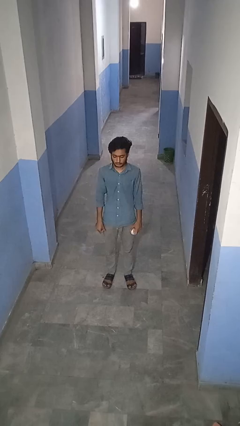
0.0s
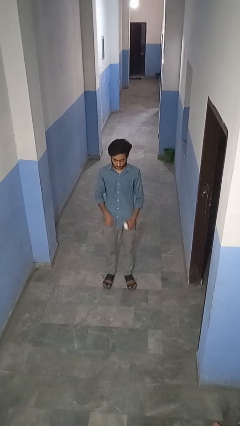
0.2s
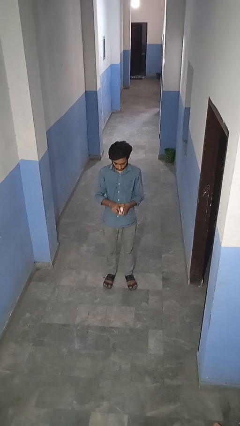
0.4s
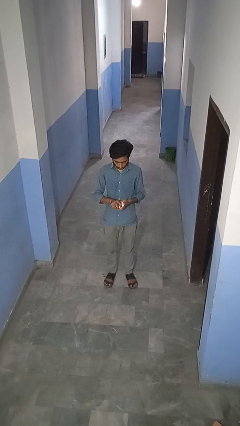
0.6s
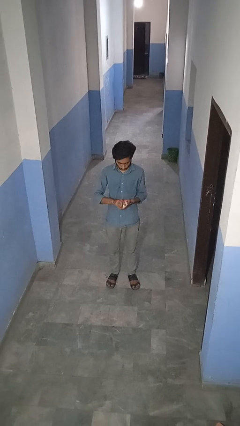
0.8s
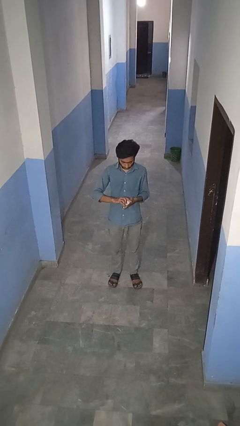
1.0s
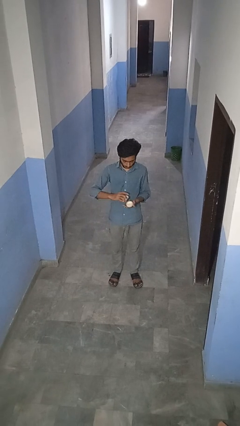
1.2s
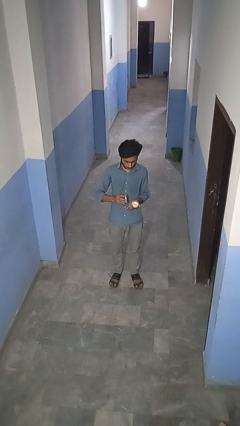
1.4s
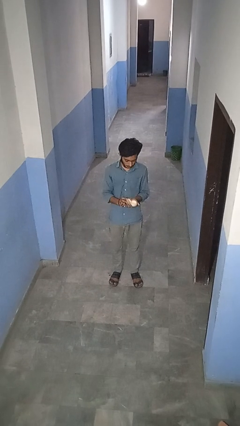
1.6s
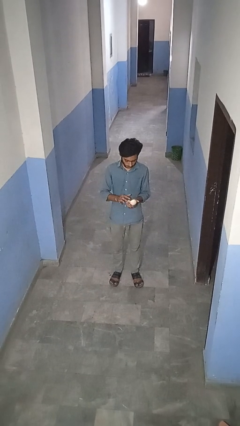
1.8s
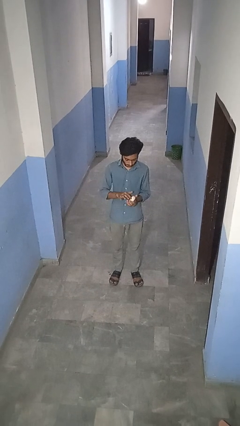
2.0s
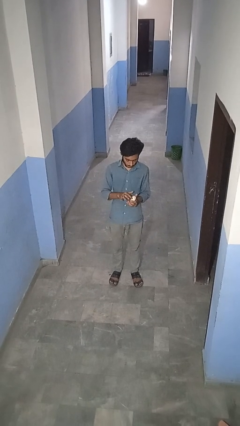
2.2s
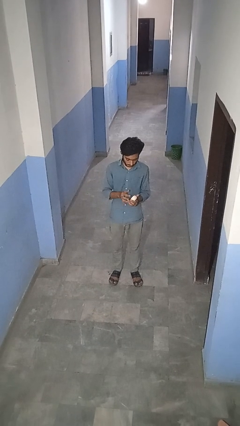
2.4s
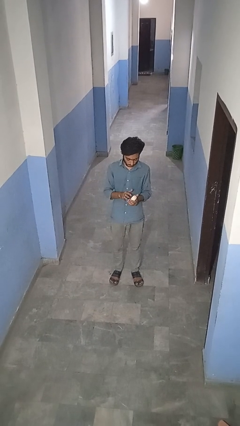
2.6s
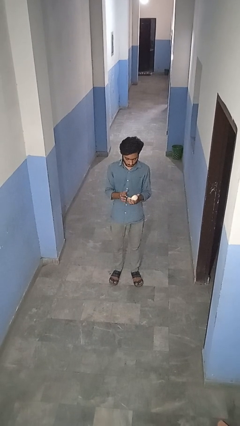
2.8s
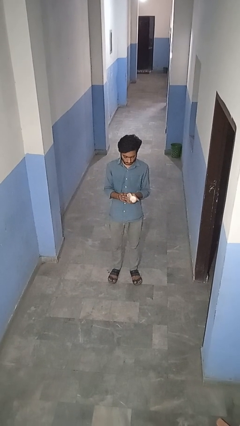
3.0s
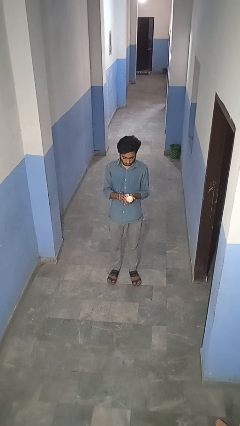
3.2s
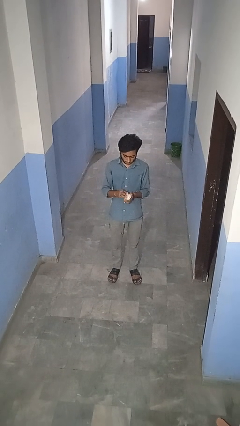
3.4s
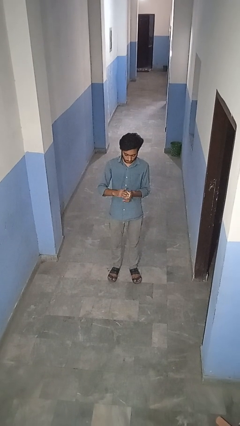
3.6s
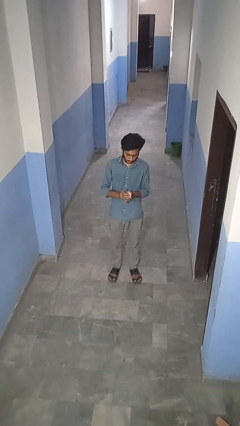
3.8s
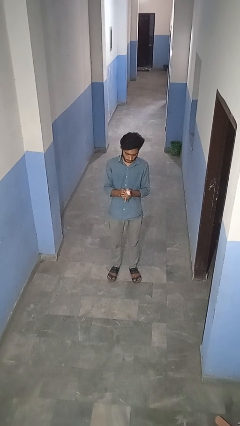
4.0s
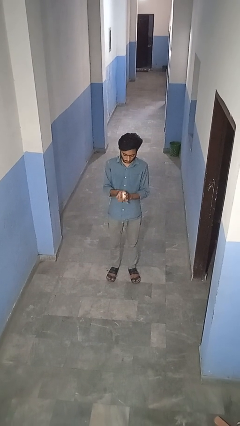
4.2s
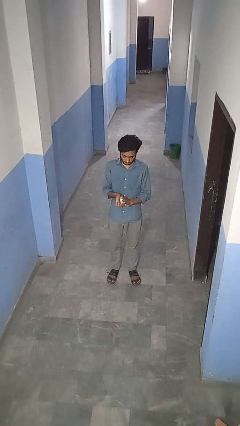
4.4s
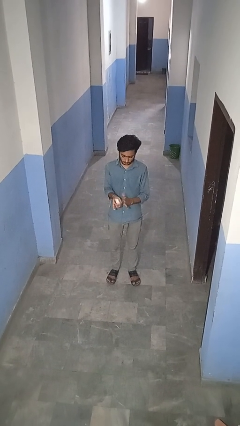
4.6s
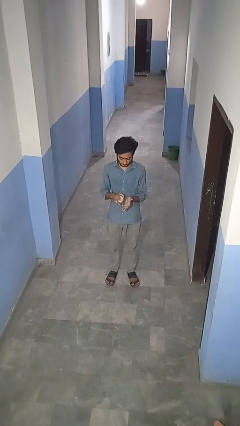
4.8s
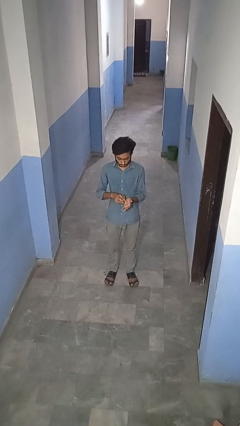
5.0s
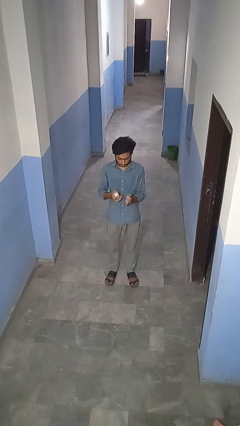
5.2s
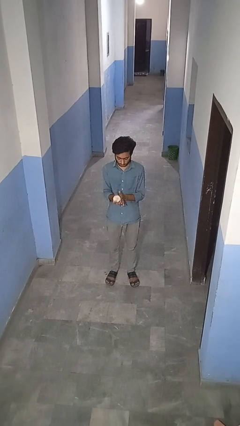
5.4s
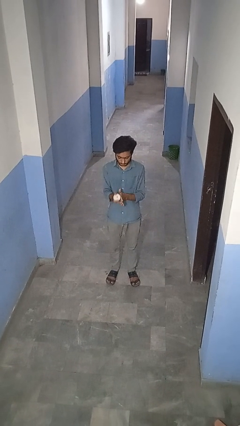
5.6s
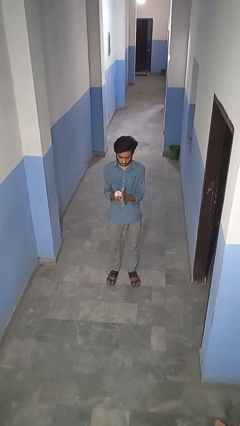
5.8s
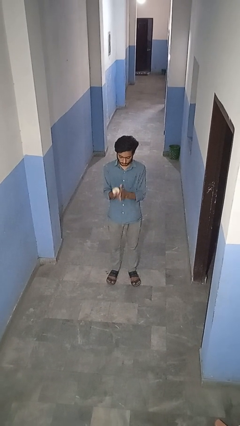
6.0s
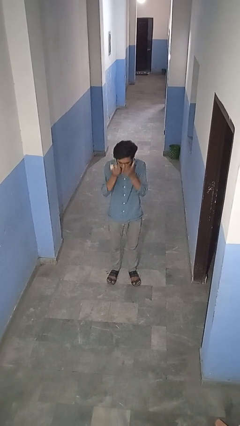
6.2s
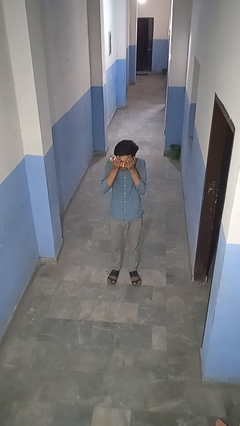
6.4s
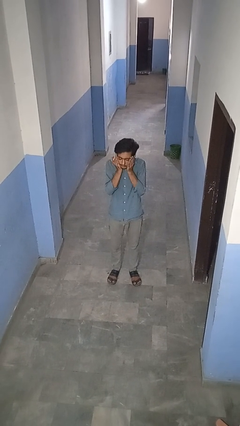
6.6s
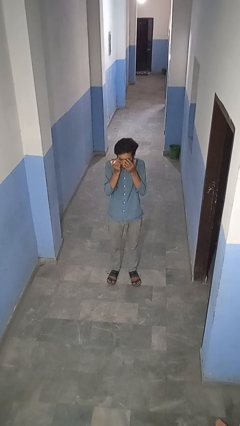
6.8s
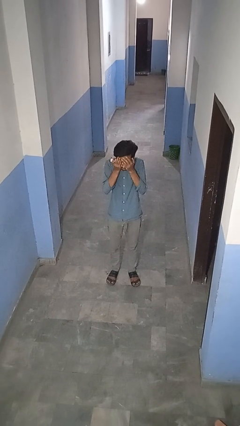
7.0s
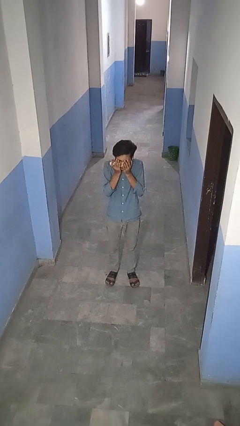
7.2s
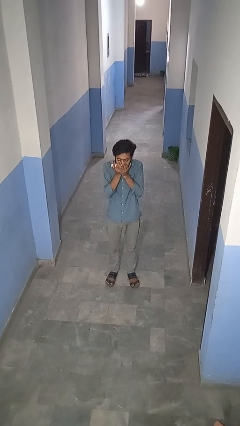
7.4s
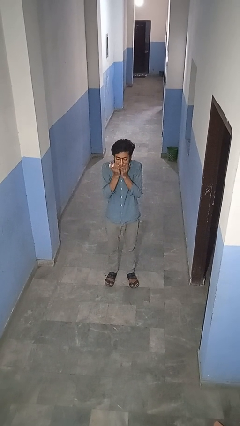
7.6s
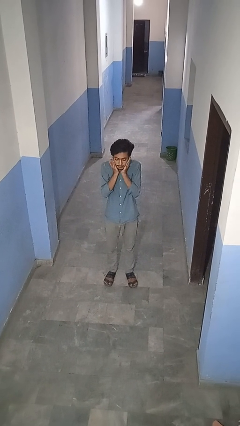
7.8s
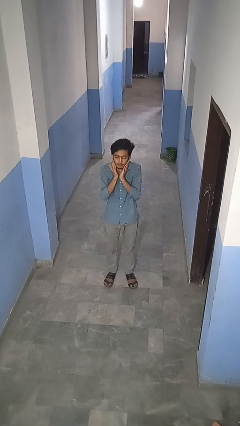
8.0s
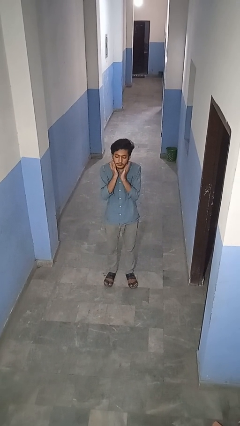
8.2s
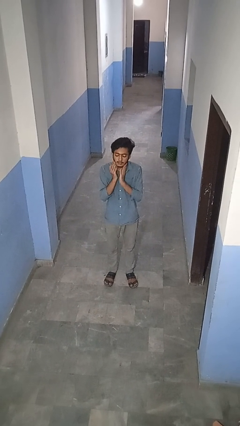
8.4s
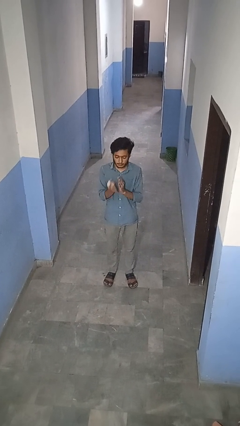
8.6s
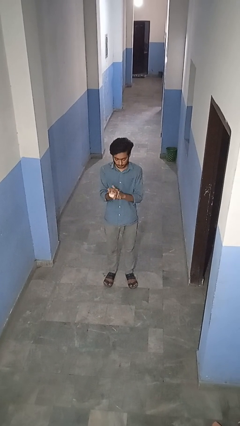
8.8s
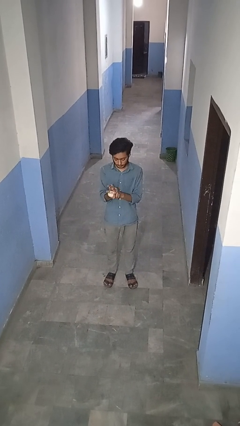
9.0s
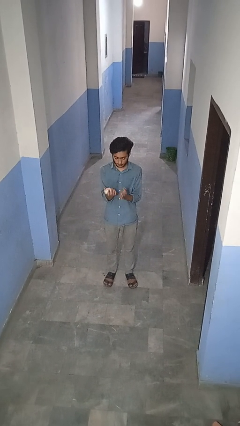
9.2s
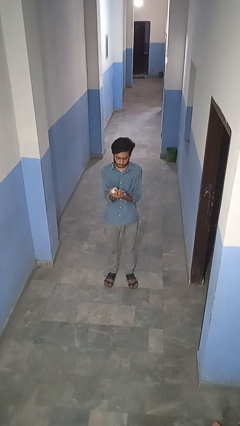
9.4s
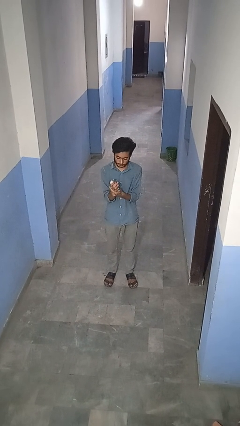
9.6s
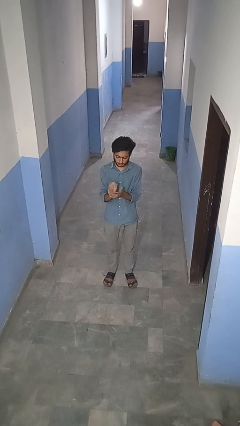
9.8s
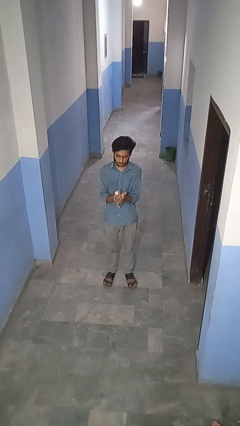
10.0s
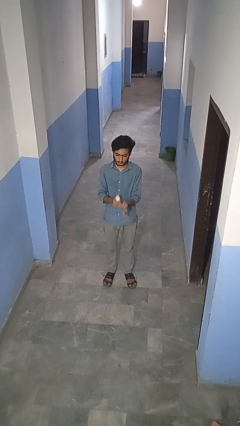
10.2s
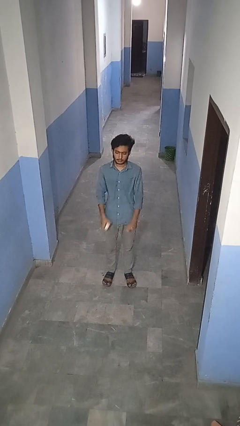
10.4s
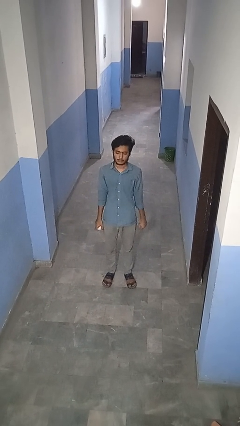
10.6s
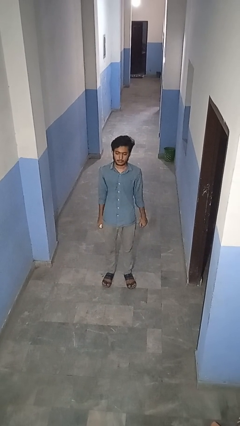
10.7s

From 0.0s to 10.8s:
person applies facial moisturizer

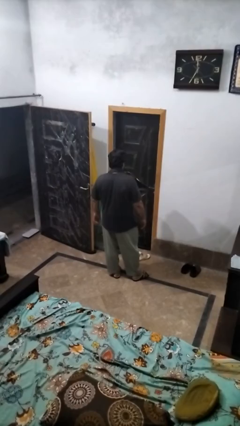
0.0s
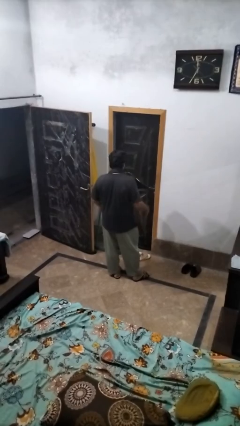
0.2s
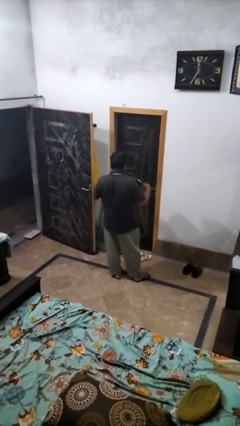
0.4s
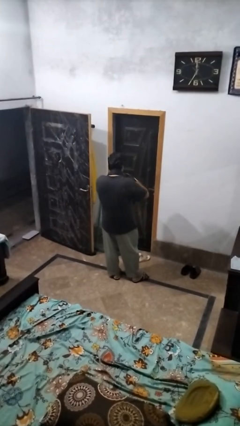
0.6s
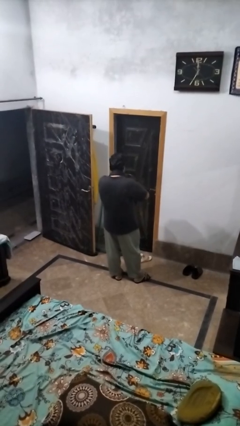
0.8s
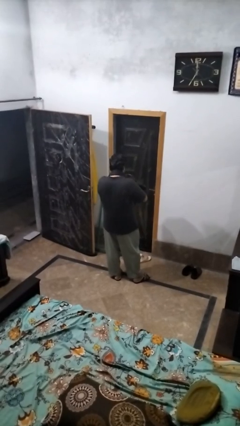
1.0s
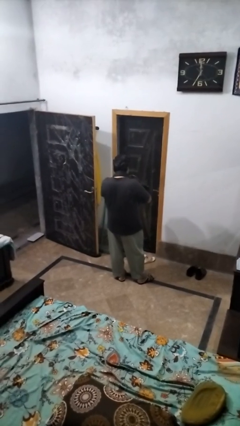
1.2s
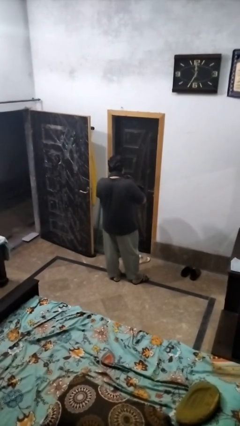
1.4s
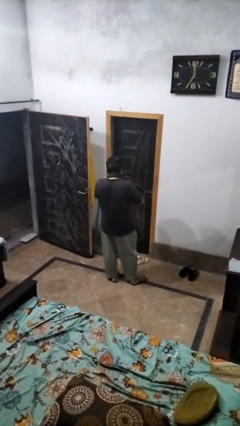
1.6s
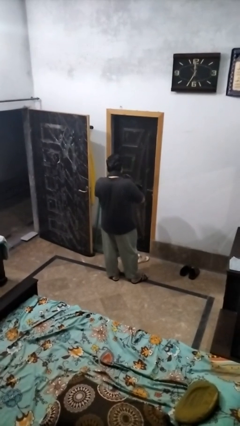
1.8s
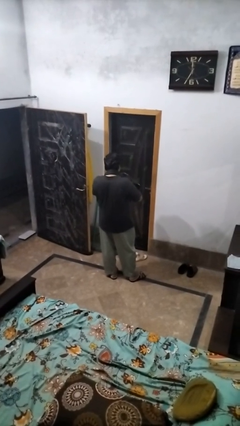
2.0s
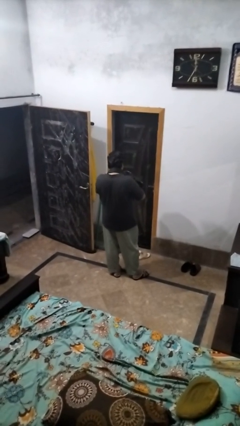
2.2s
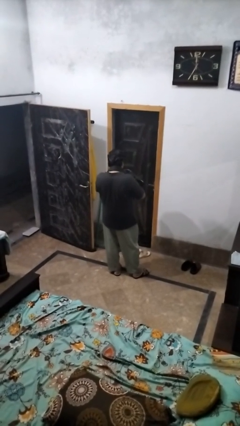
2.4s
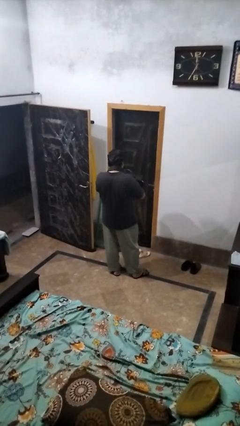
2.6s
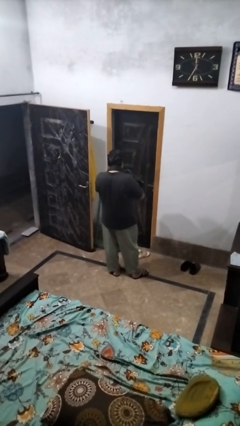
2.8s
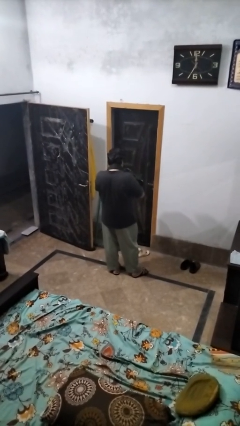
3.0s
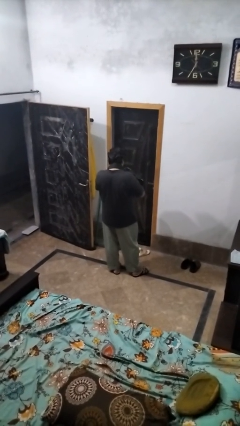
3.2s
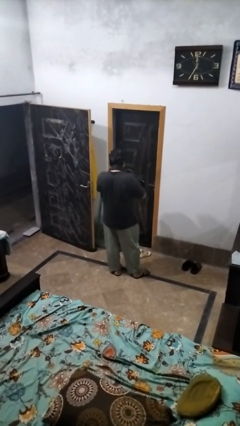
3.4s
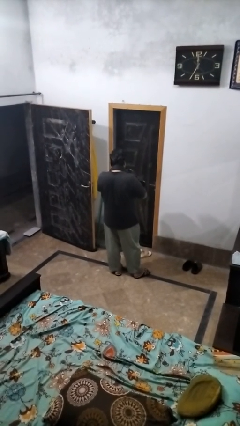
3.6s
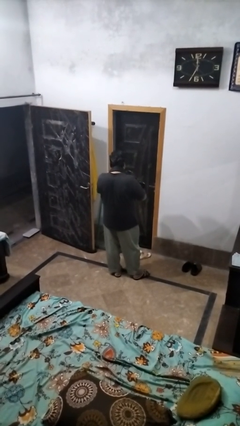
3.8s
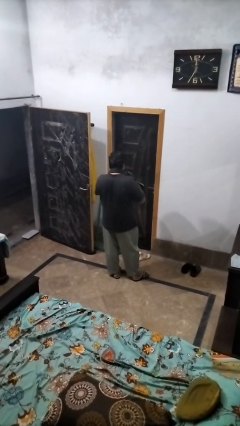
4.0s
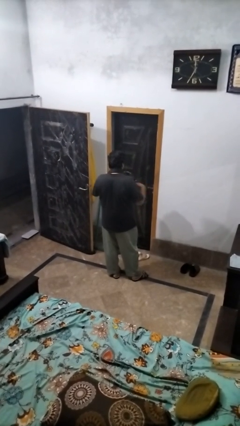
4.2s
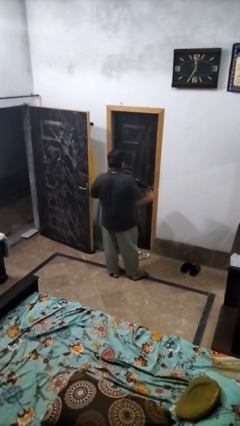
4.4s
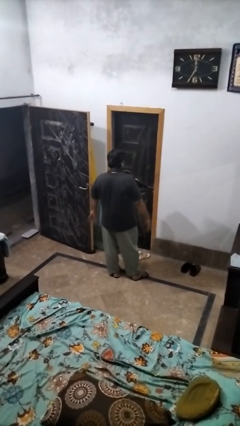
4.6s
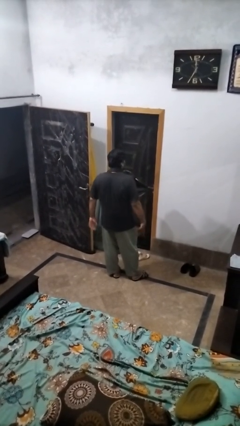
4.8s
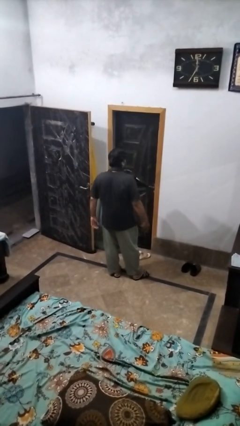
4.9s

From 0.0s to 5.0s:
person searches in bag

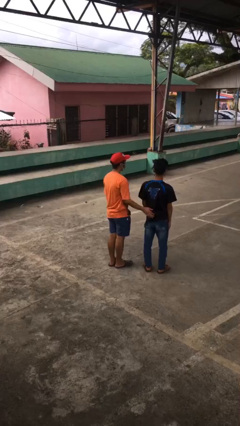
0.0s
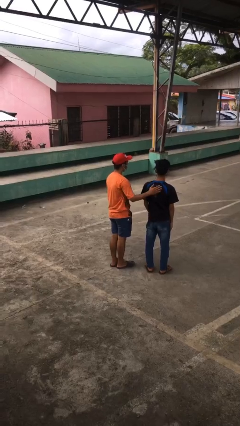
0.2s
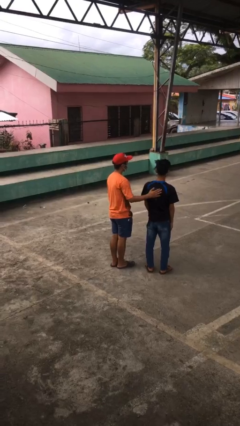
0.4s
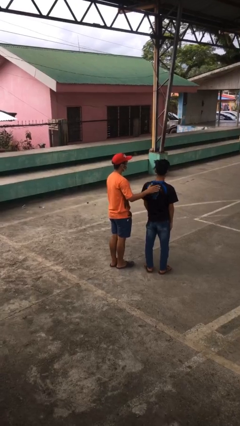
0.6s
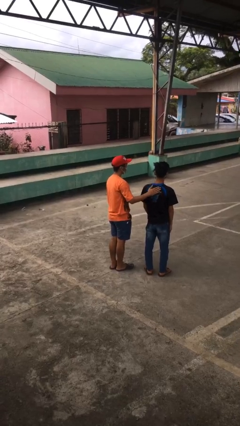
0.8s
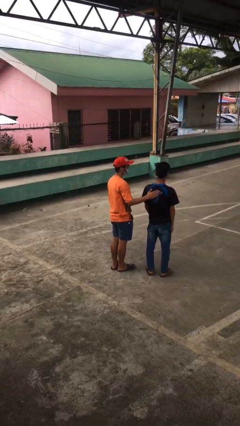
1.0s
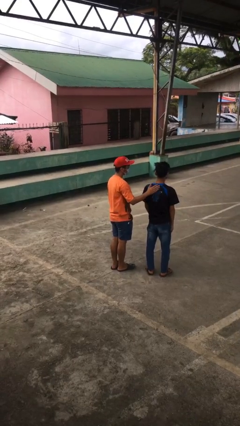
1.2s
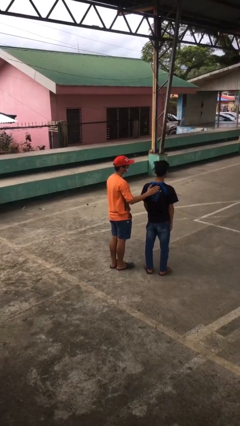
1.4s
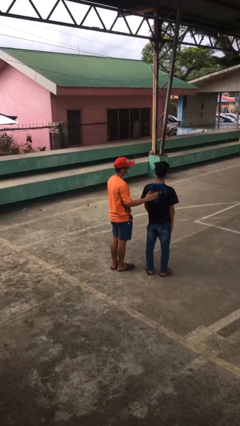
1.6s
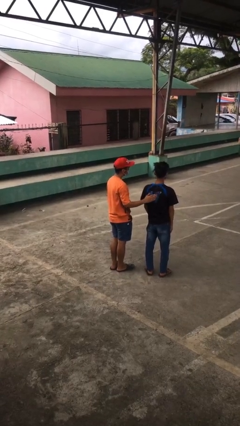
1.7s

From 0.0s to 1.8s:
person touches back of person

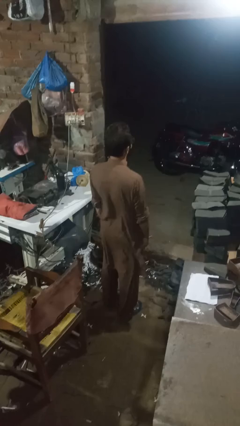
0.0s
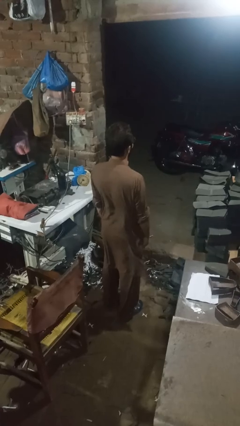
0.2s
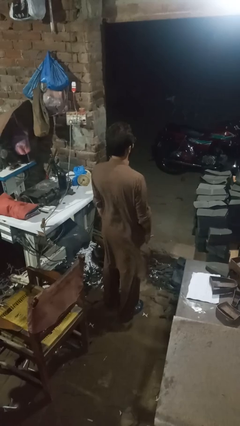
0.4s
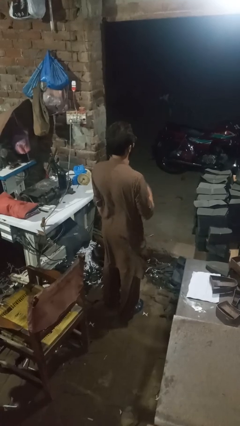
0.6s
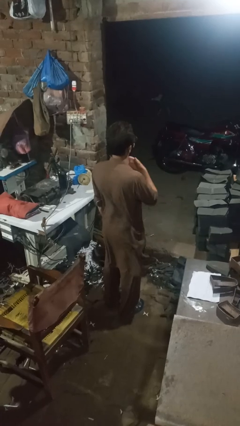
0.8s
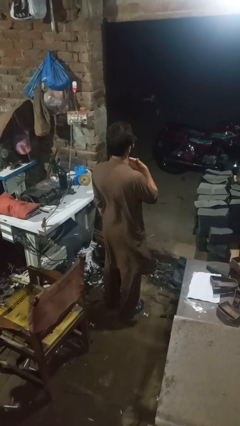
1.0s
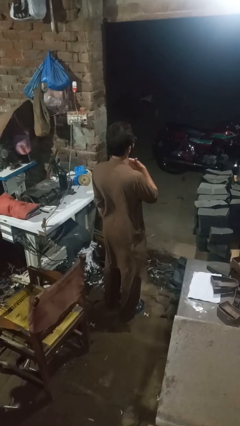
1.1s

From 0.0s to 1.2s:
person rubs neck
